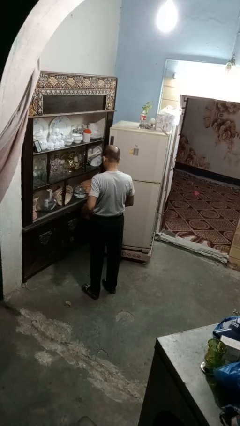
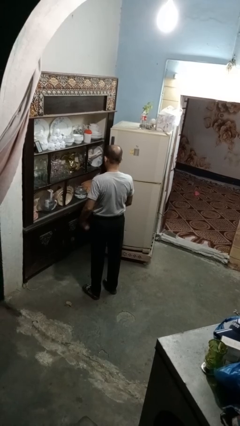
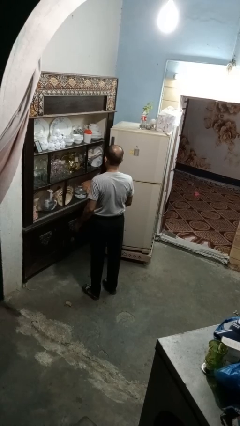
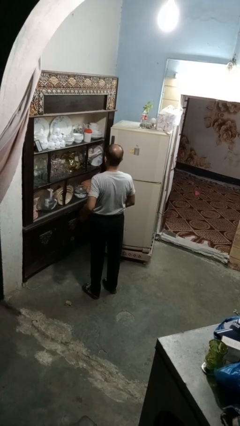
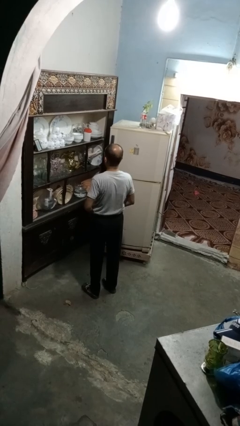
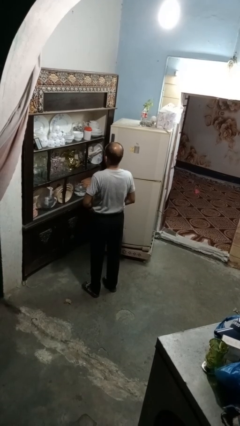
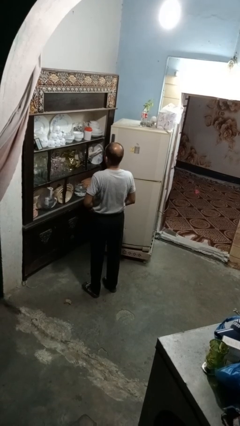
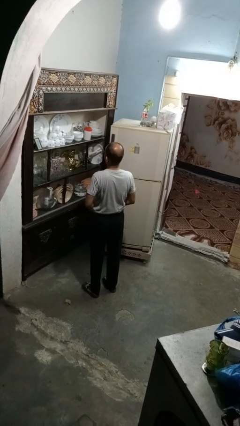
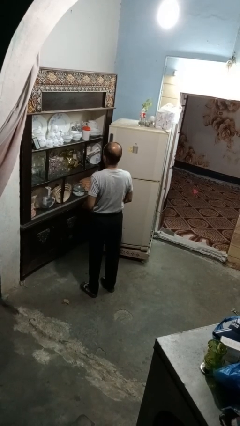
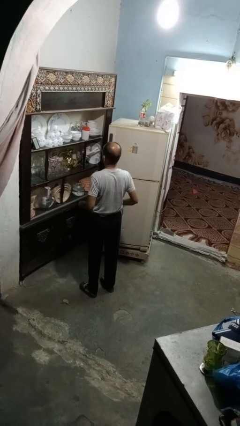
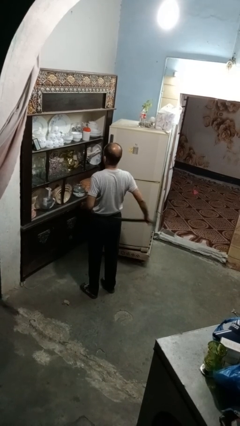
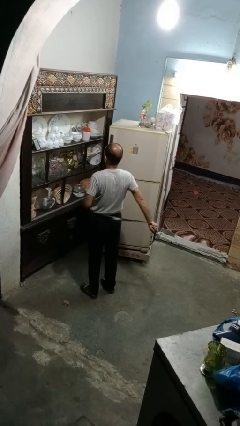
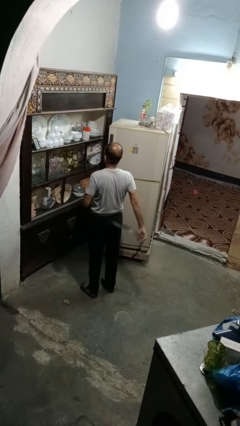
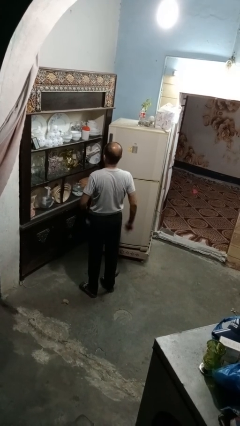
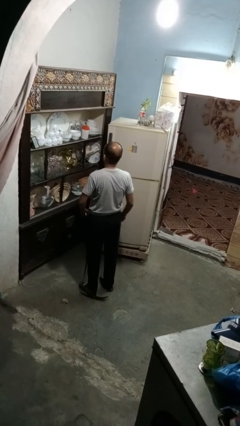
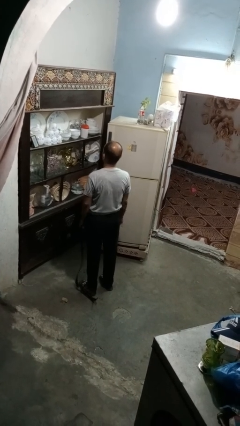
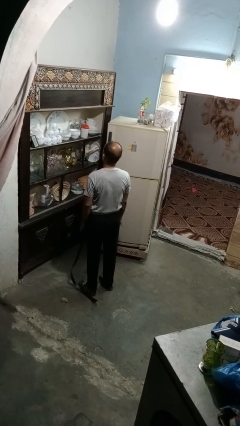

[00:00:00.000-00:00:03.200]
person takes off belt

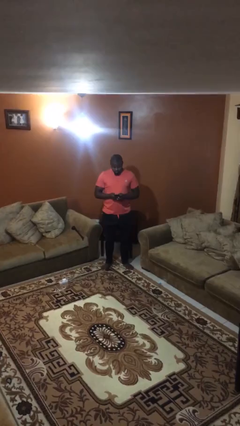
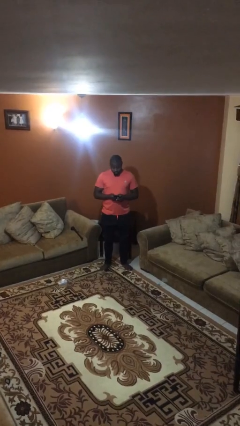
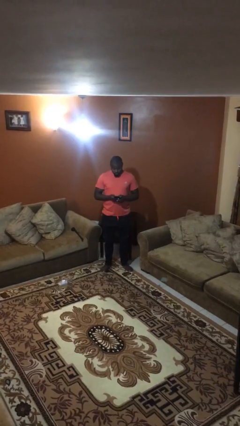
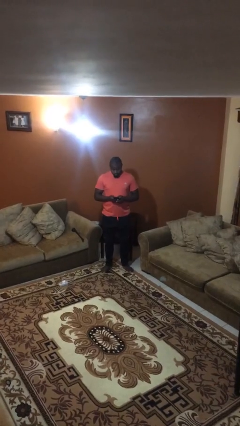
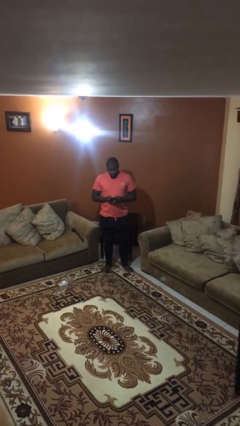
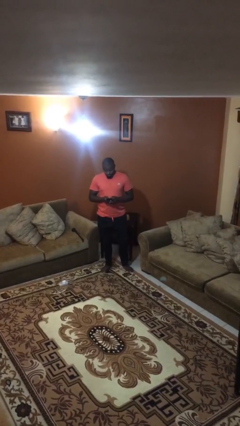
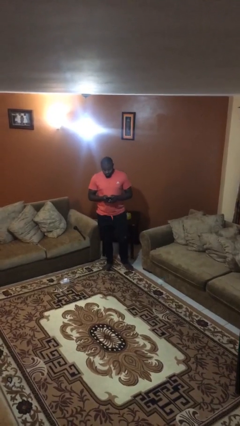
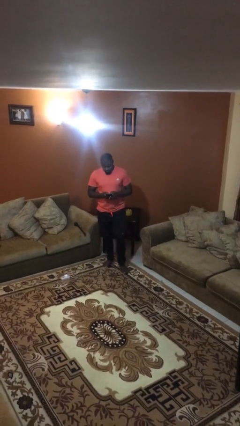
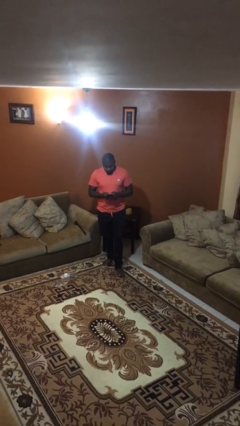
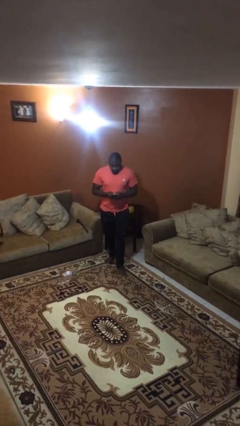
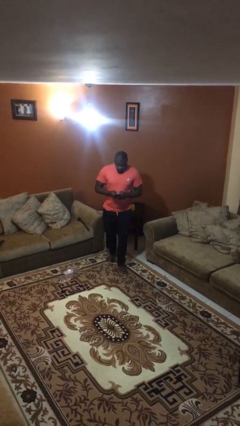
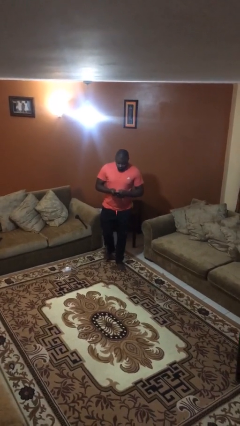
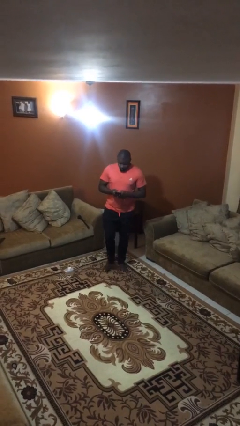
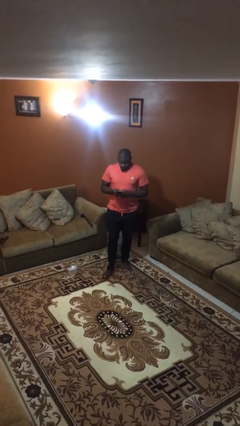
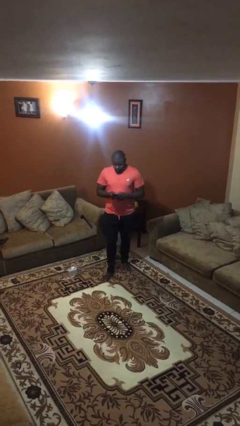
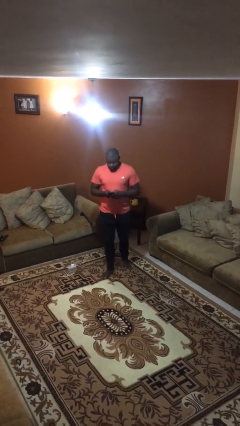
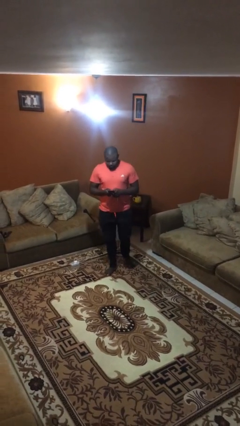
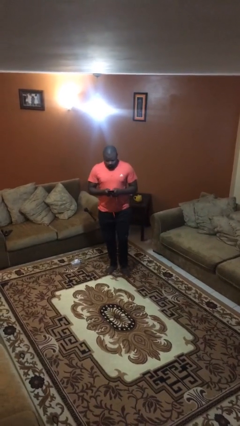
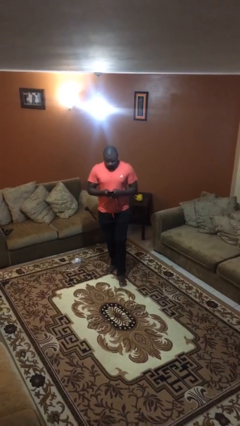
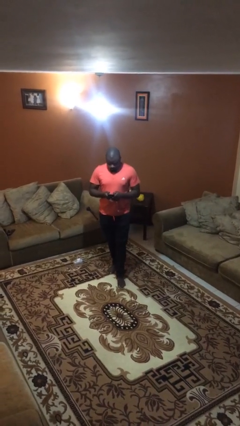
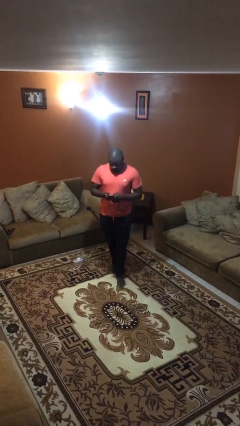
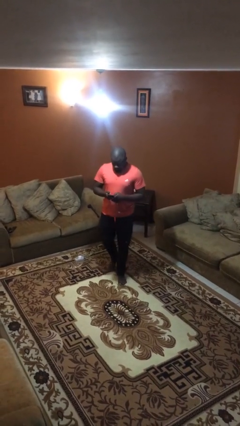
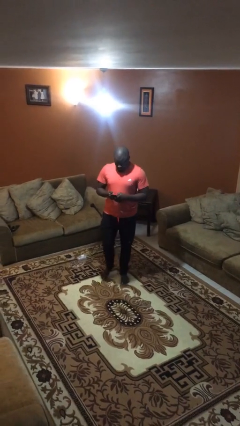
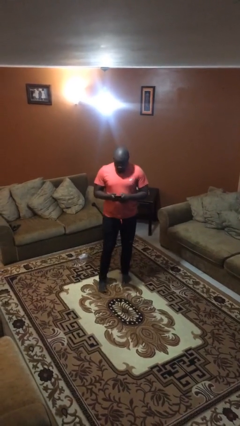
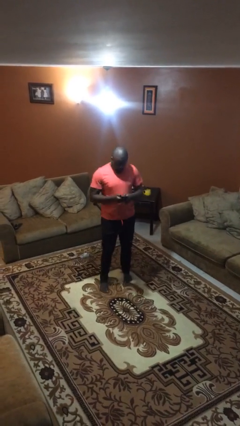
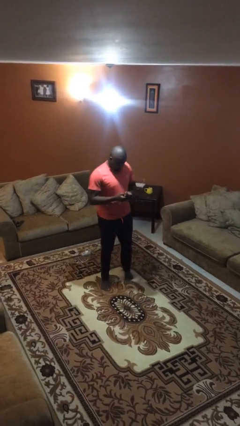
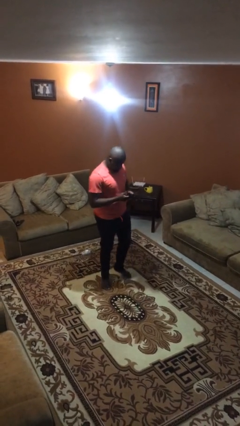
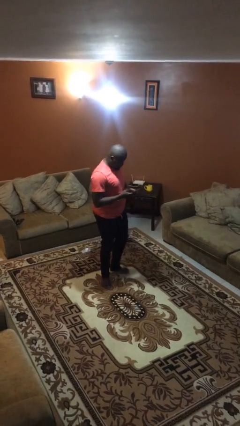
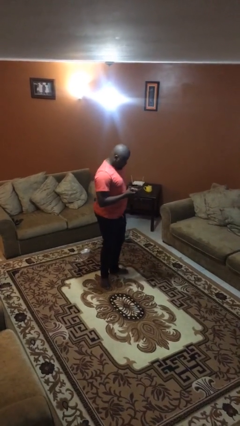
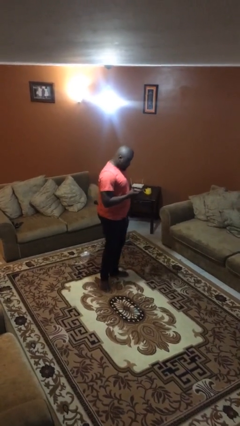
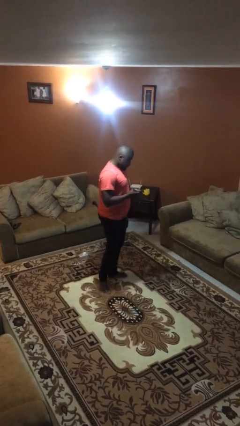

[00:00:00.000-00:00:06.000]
person texts on phone

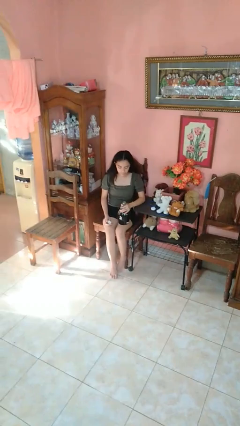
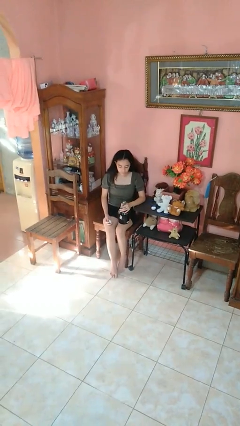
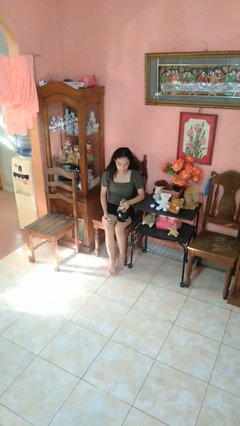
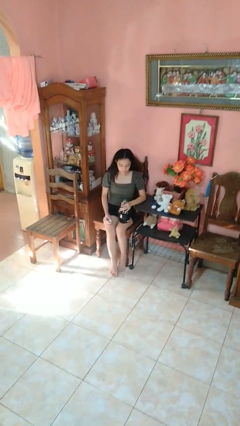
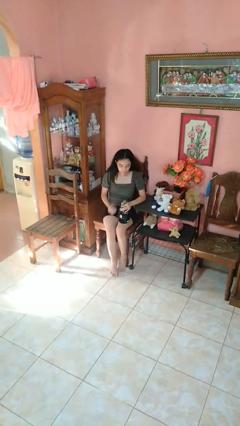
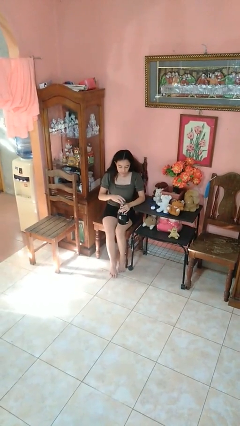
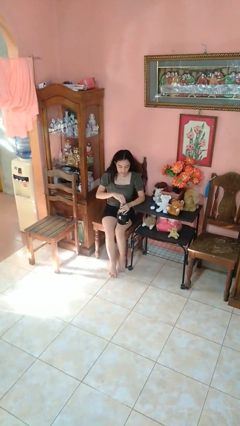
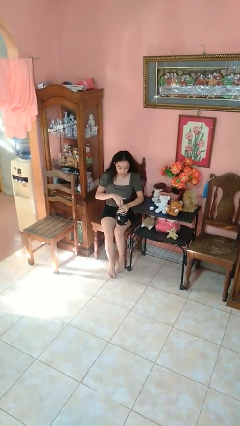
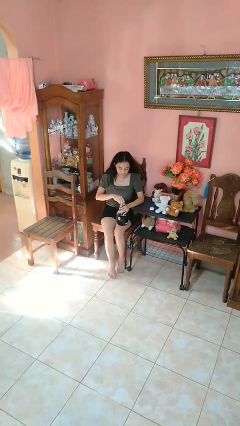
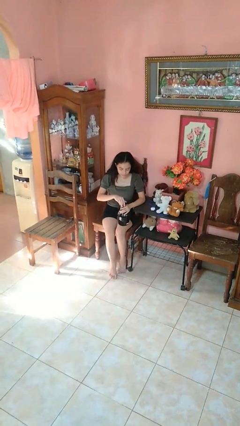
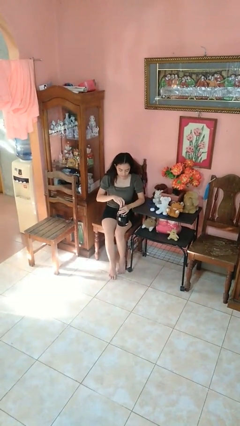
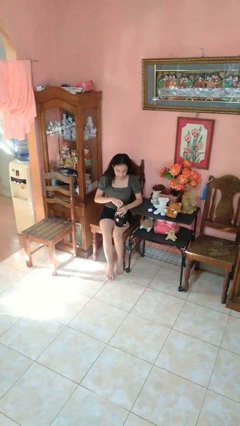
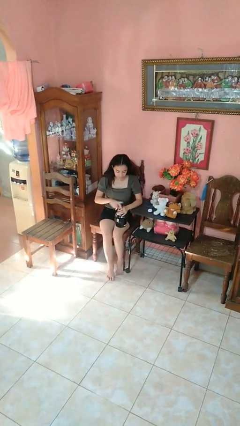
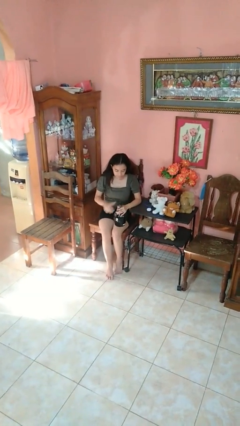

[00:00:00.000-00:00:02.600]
person screws lid to bottle

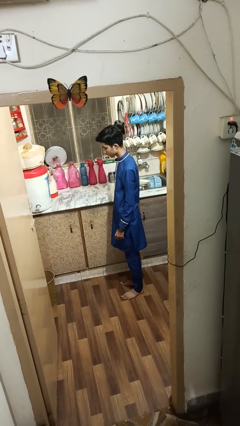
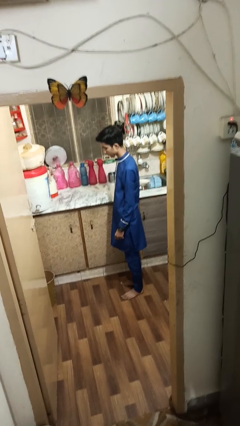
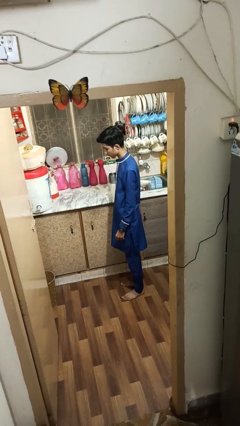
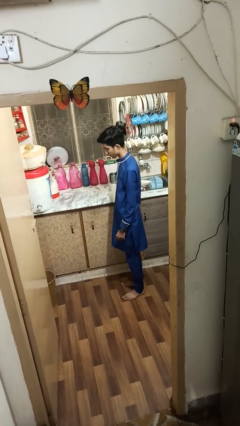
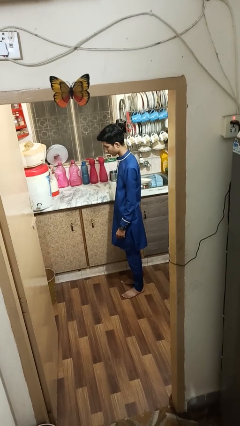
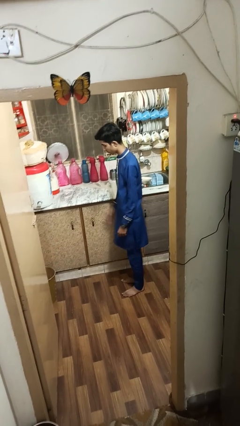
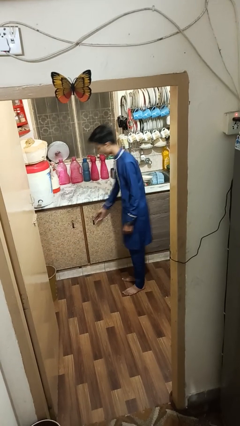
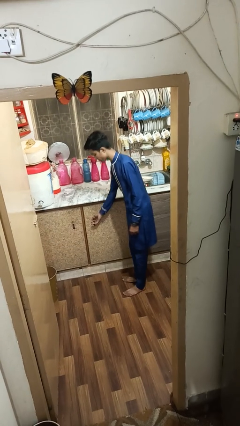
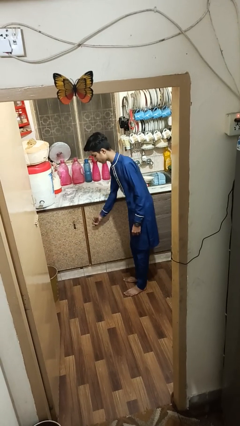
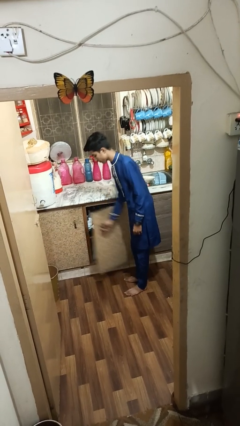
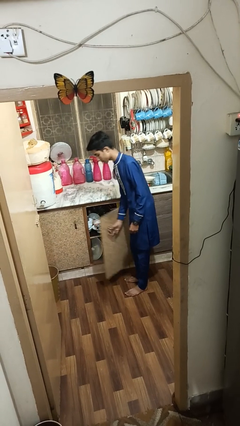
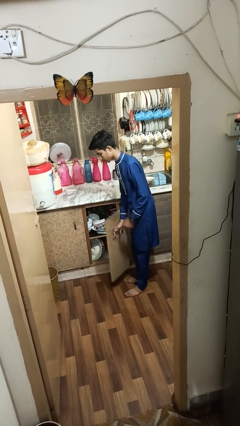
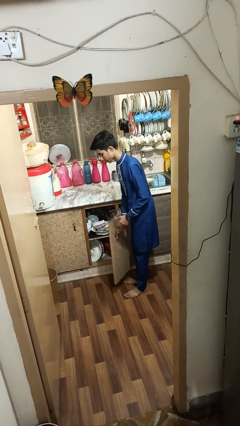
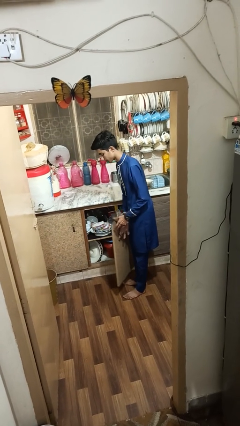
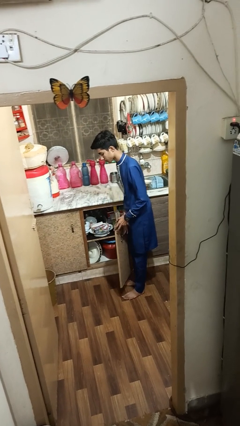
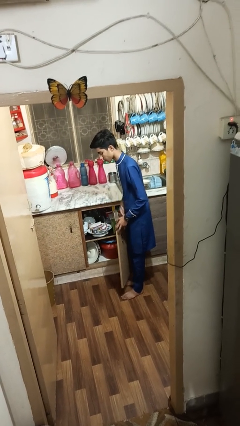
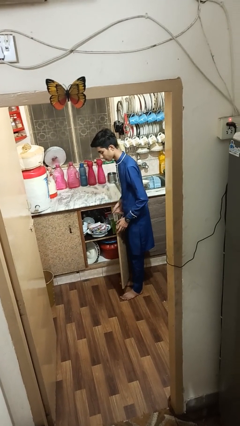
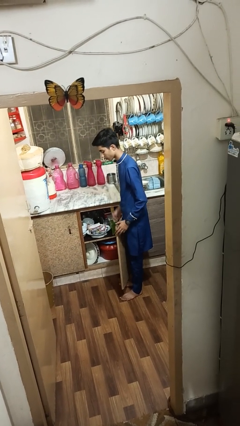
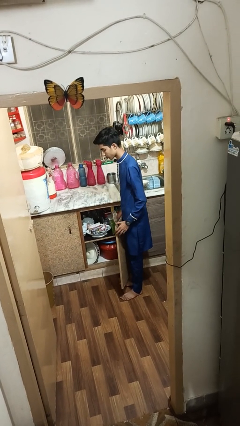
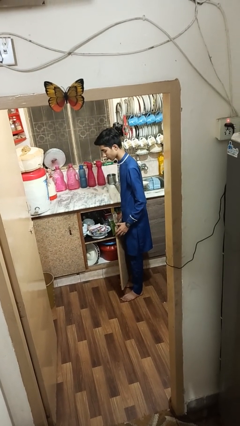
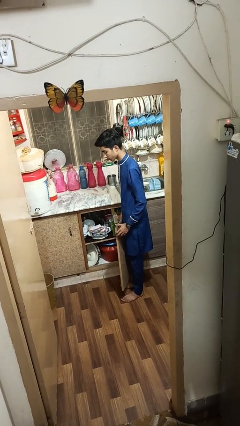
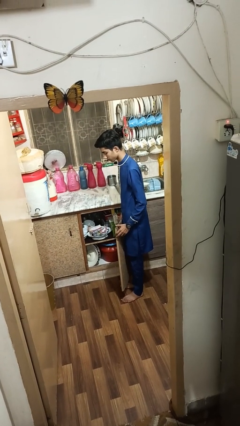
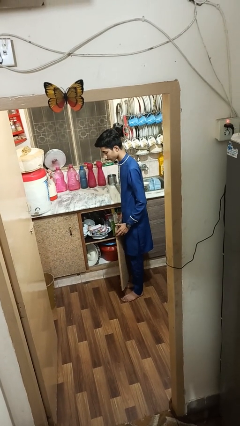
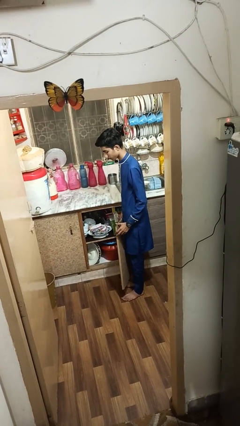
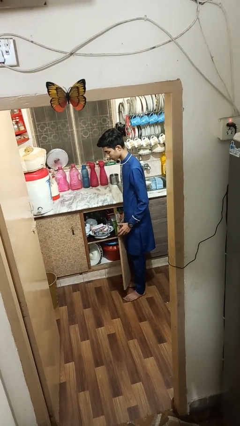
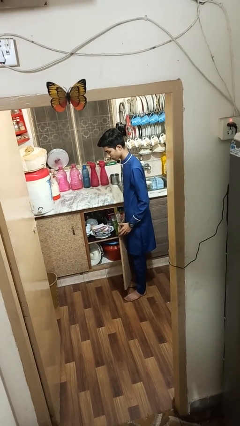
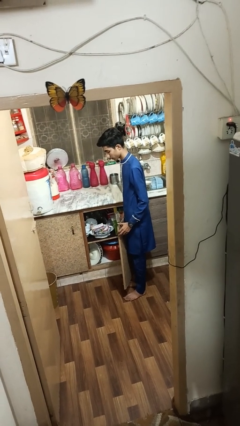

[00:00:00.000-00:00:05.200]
person opens cabinet

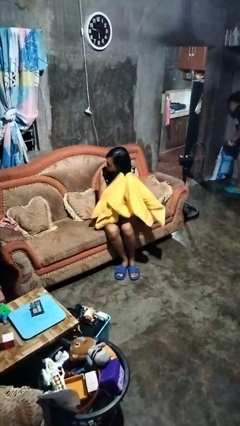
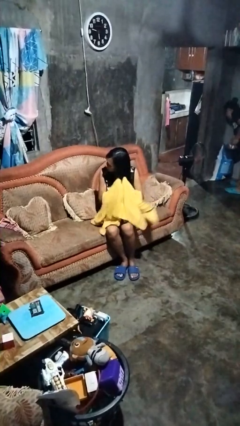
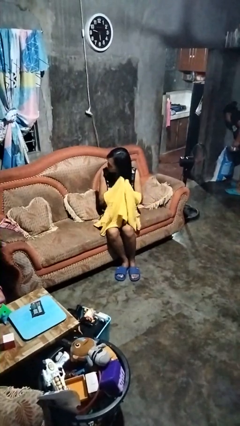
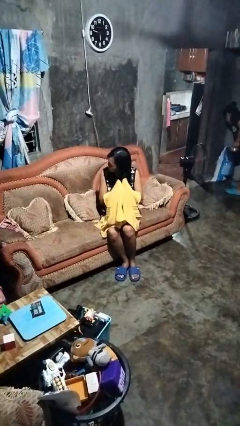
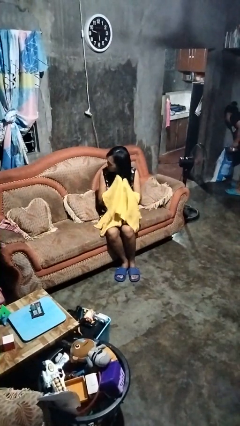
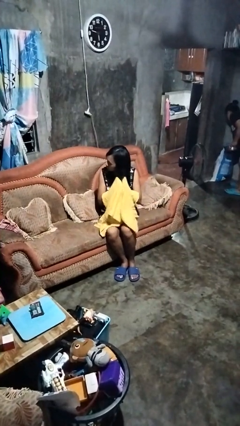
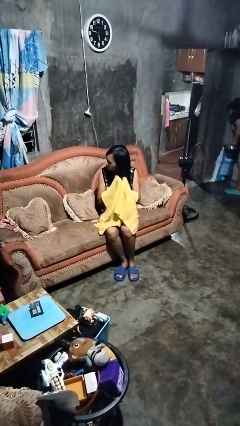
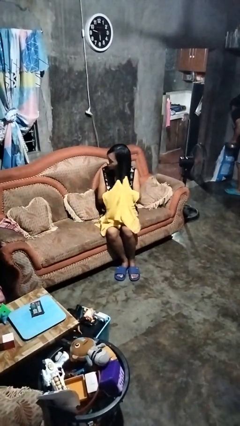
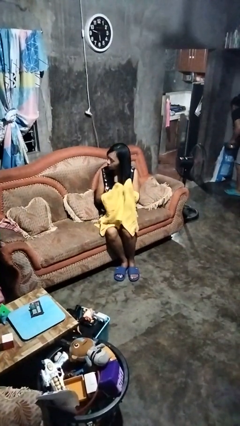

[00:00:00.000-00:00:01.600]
person dries hair with towel
